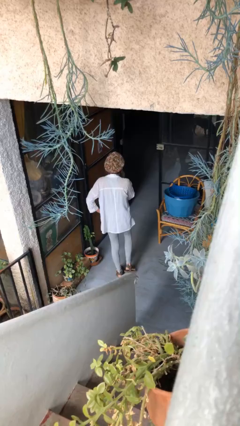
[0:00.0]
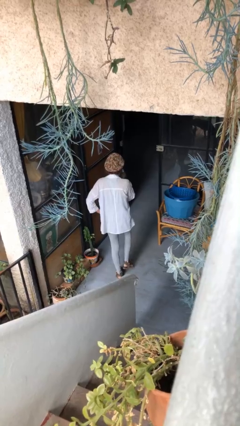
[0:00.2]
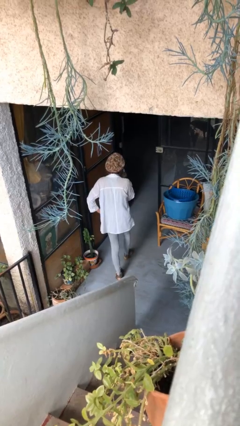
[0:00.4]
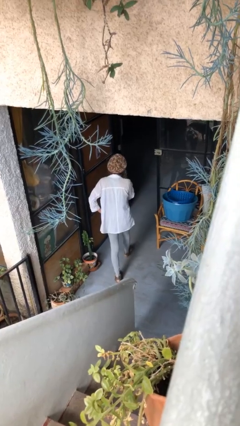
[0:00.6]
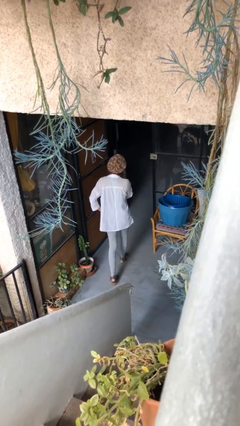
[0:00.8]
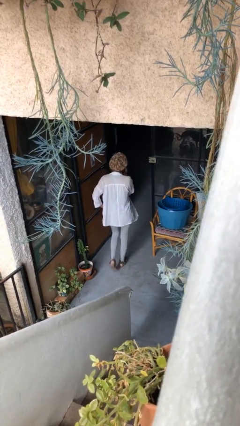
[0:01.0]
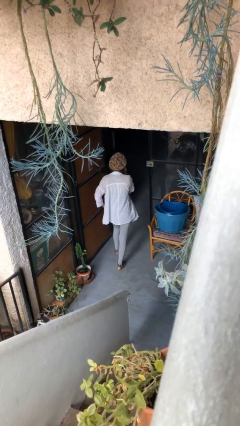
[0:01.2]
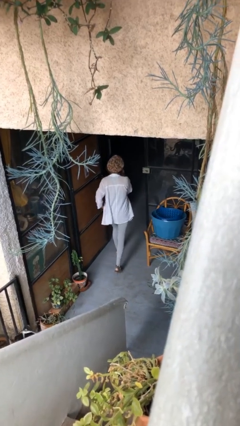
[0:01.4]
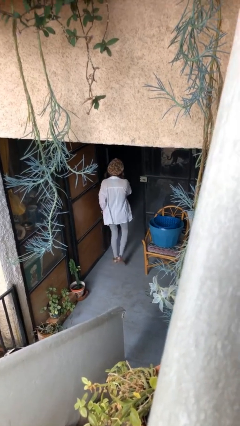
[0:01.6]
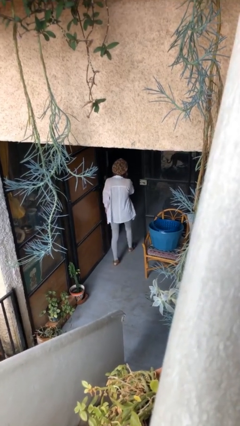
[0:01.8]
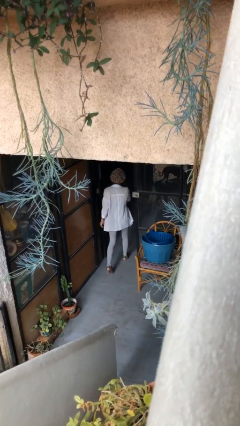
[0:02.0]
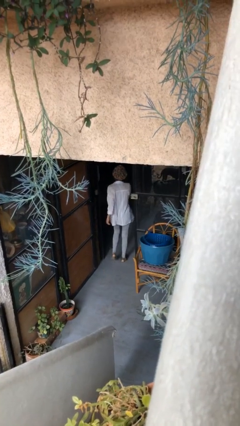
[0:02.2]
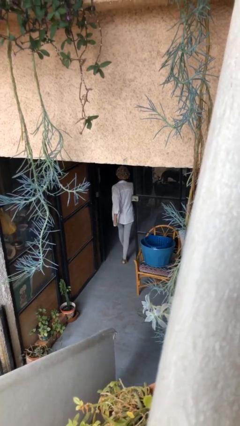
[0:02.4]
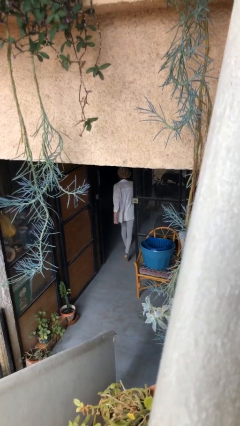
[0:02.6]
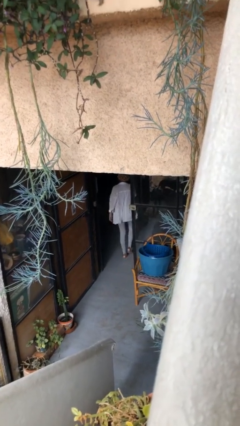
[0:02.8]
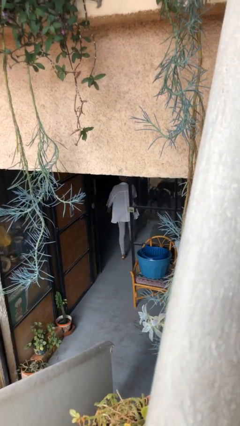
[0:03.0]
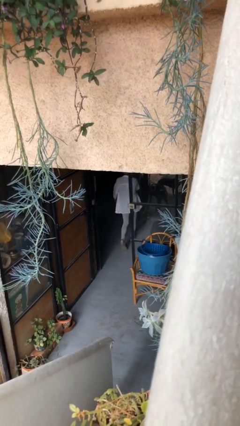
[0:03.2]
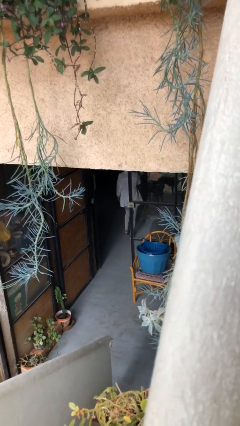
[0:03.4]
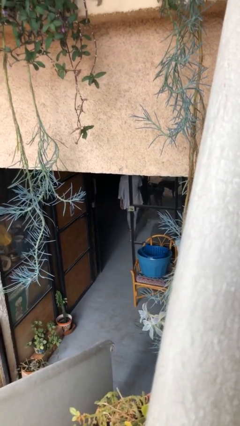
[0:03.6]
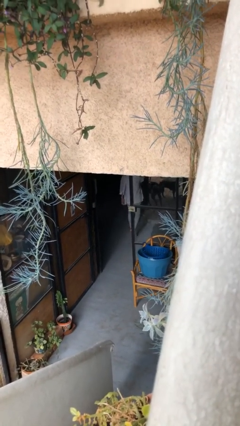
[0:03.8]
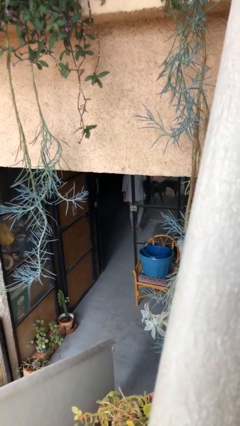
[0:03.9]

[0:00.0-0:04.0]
person exits scene through structure

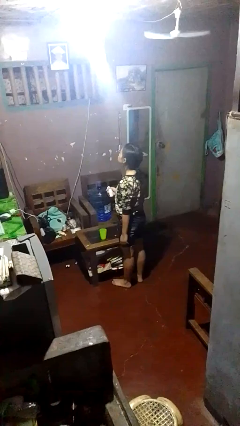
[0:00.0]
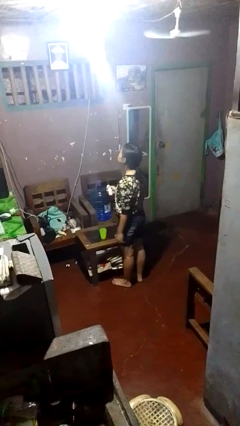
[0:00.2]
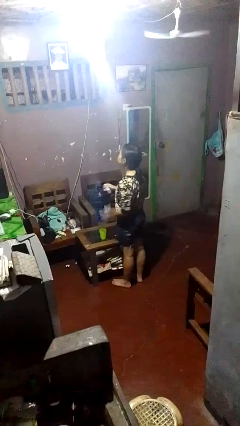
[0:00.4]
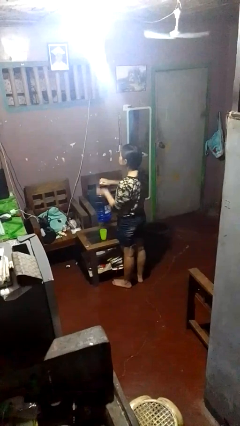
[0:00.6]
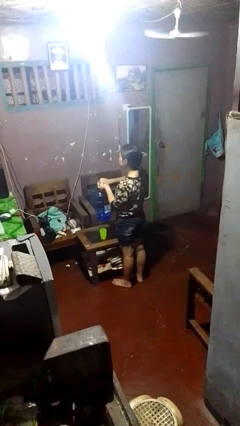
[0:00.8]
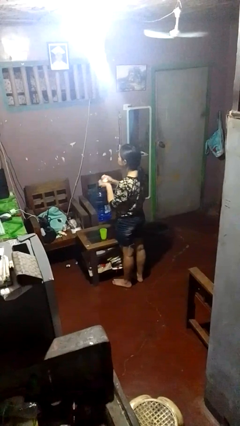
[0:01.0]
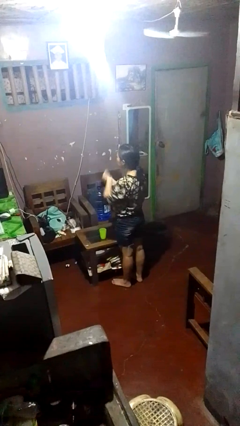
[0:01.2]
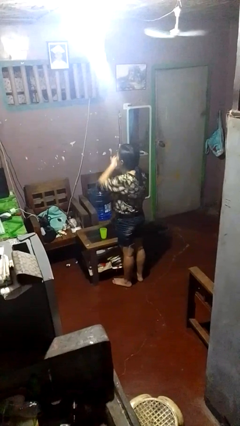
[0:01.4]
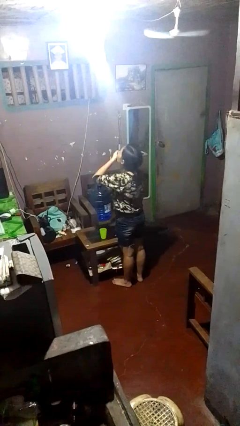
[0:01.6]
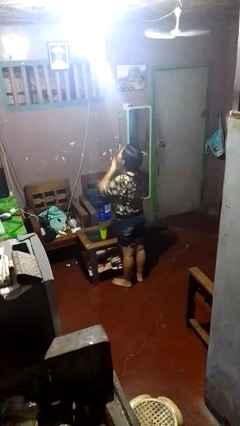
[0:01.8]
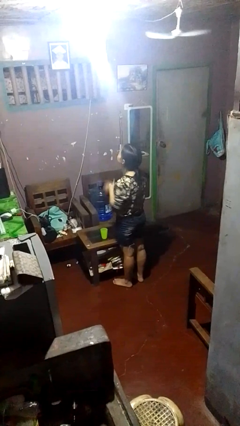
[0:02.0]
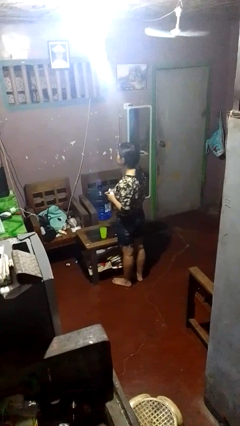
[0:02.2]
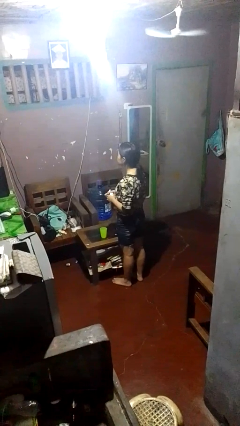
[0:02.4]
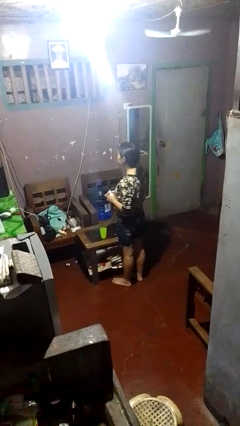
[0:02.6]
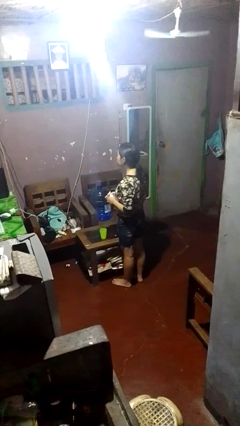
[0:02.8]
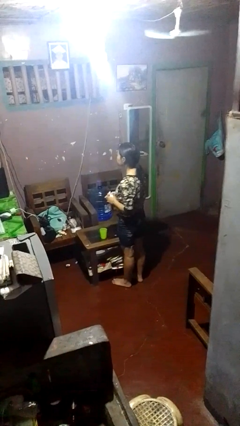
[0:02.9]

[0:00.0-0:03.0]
person takes medicine pills

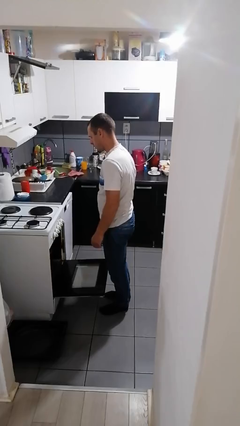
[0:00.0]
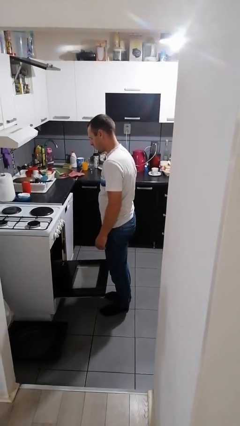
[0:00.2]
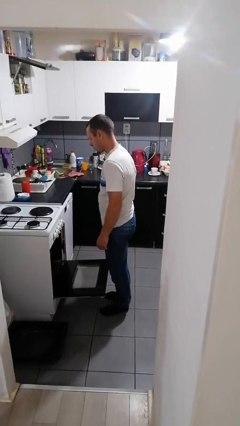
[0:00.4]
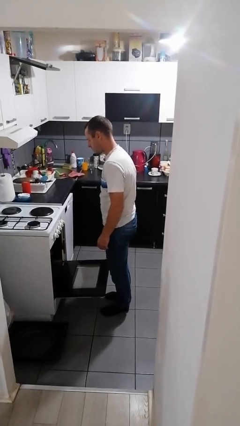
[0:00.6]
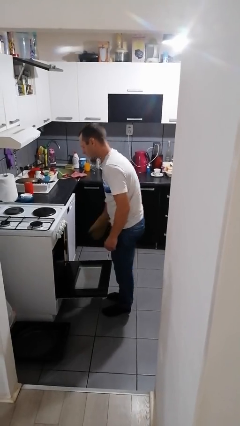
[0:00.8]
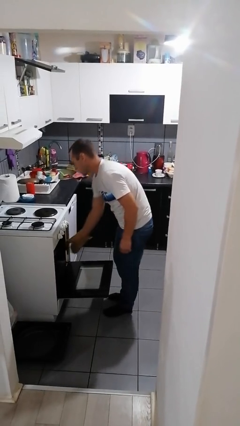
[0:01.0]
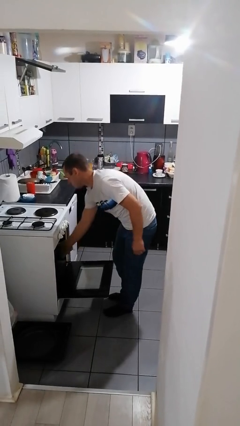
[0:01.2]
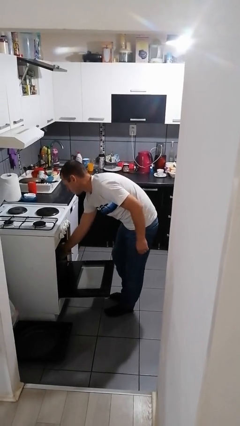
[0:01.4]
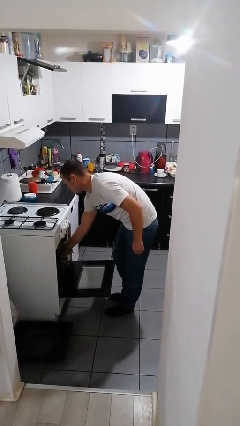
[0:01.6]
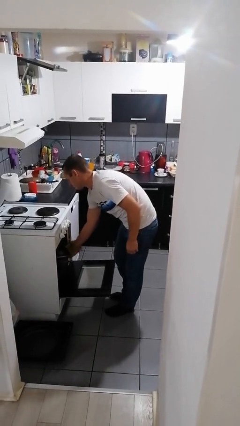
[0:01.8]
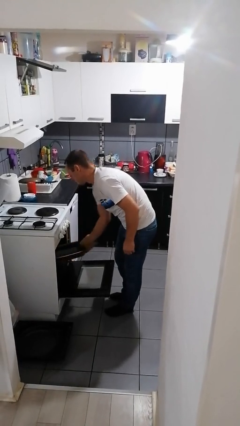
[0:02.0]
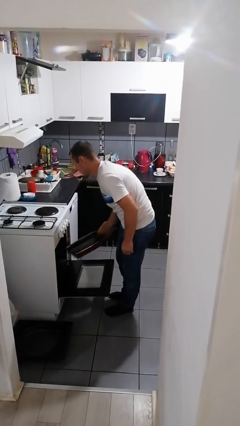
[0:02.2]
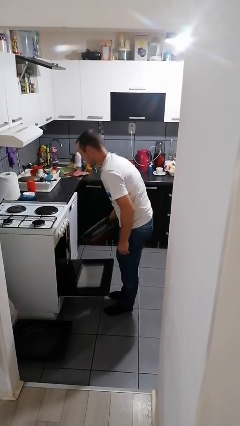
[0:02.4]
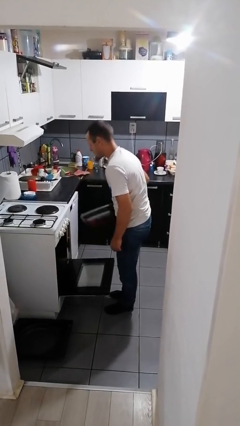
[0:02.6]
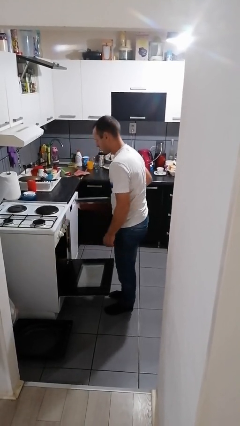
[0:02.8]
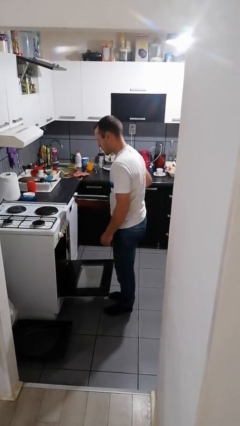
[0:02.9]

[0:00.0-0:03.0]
person takes object from oven

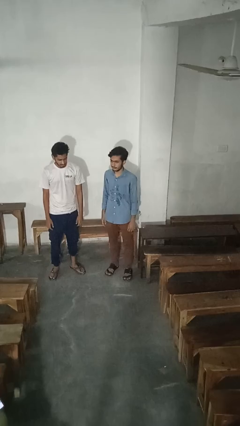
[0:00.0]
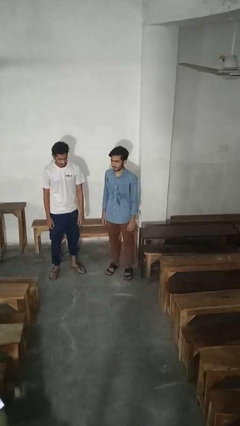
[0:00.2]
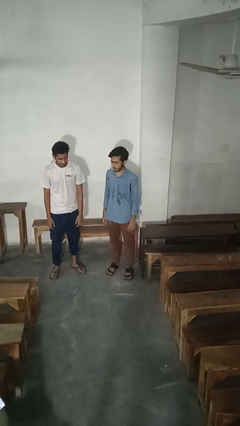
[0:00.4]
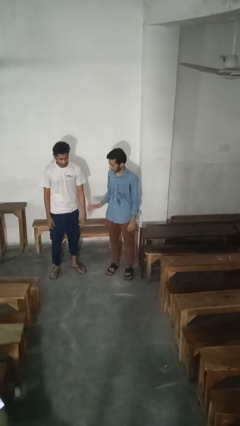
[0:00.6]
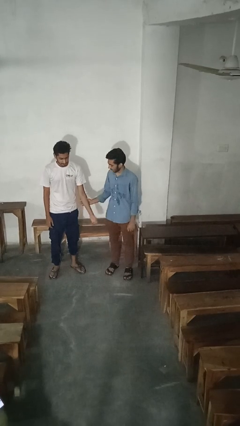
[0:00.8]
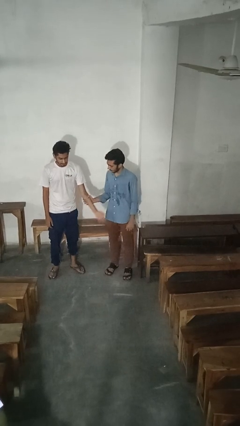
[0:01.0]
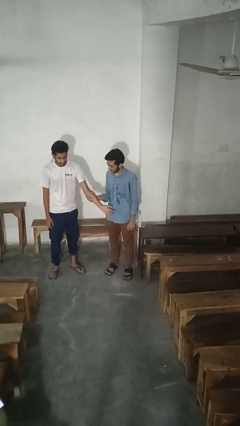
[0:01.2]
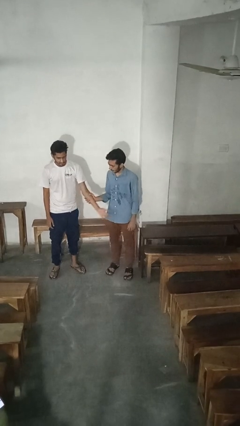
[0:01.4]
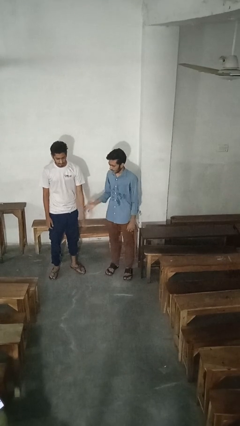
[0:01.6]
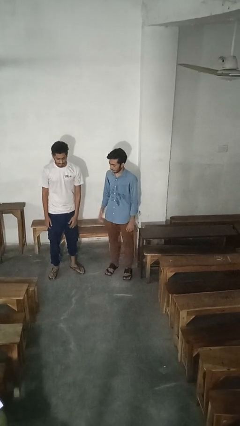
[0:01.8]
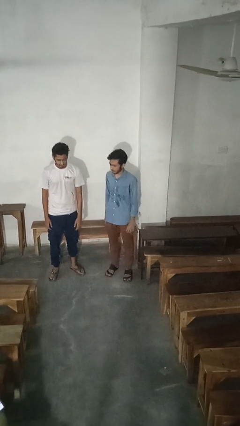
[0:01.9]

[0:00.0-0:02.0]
person grabs person by forearm

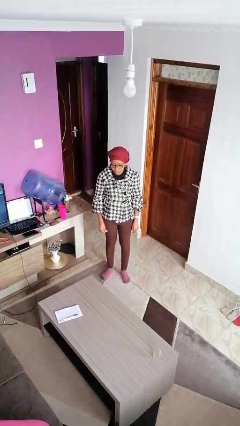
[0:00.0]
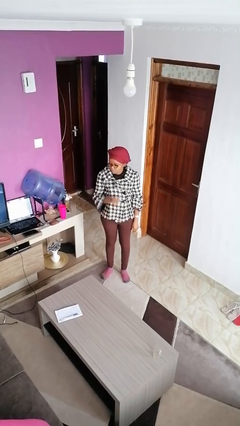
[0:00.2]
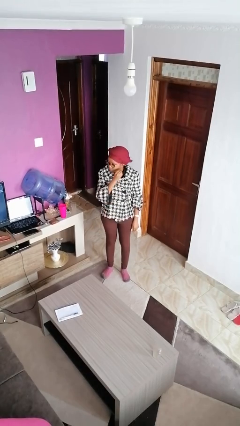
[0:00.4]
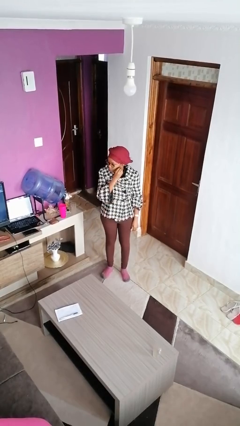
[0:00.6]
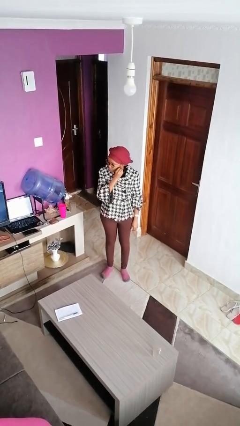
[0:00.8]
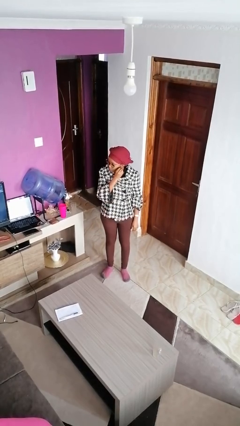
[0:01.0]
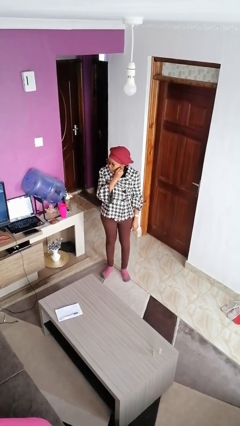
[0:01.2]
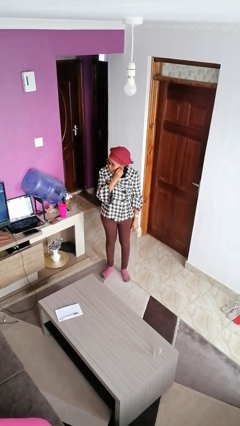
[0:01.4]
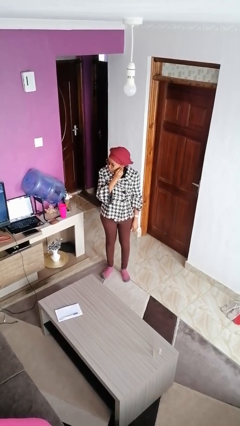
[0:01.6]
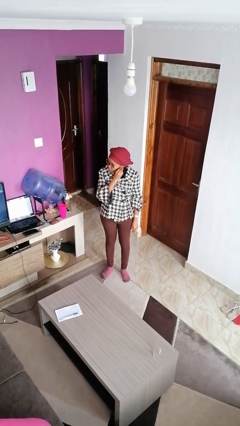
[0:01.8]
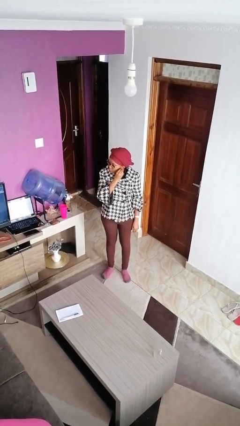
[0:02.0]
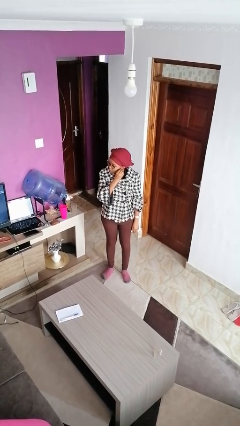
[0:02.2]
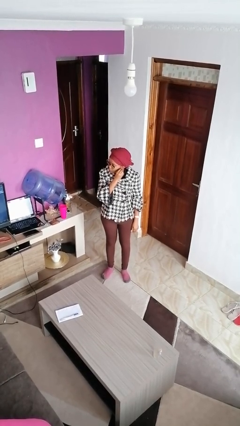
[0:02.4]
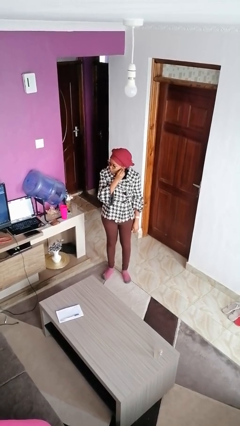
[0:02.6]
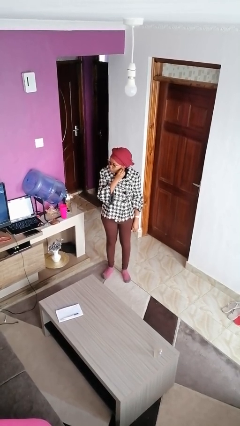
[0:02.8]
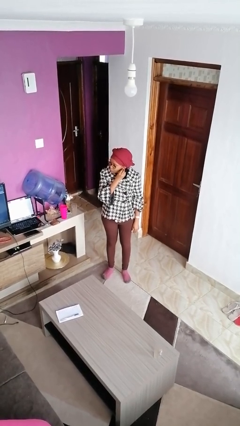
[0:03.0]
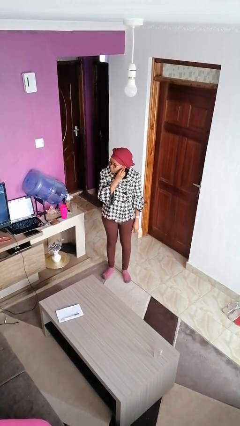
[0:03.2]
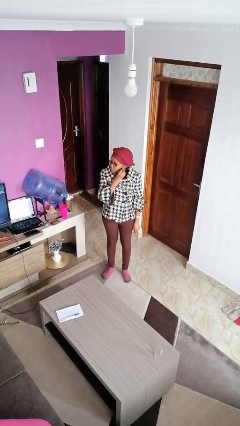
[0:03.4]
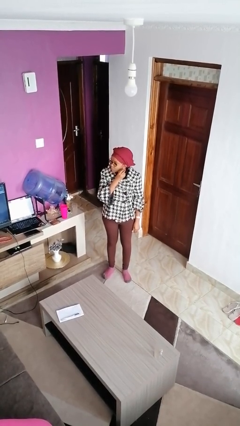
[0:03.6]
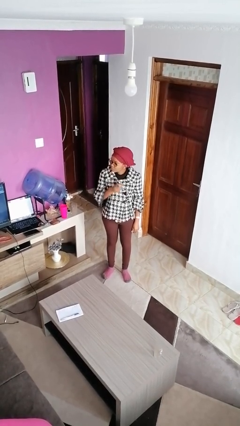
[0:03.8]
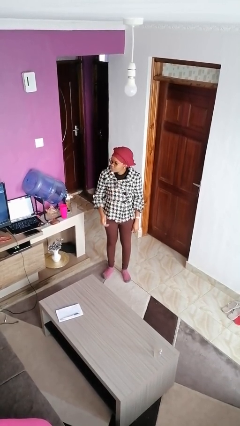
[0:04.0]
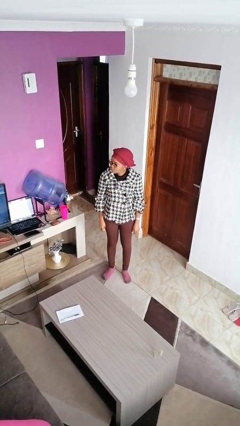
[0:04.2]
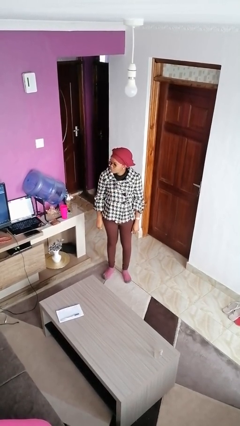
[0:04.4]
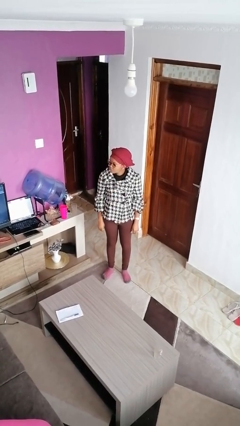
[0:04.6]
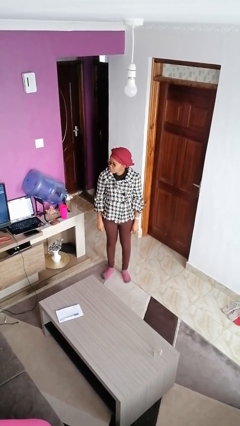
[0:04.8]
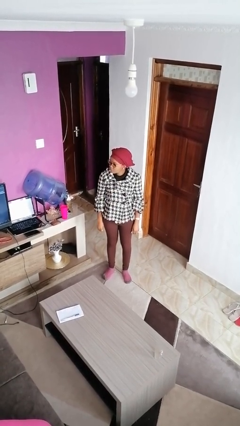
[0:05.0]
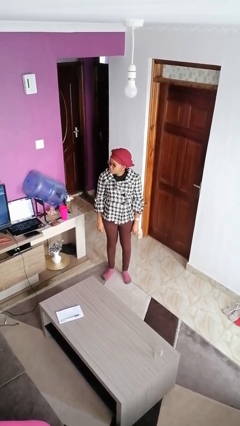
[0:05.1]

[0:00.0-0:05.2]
person puts on earrings

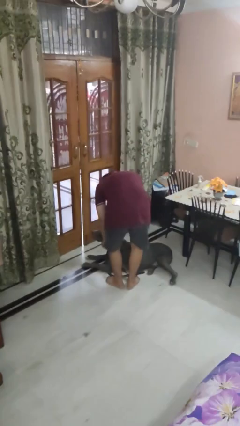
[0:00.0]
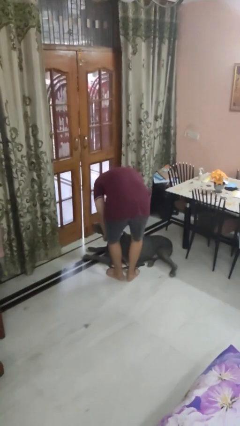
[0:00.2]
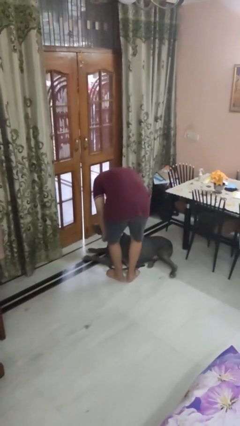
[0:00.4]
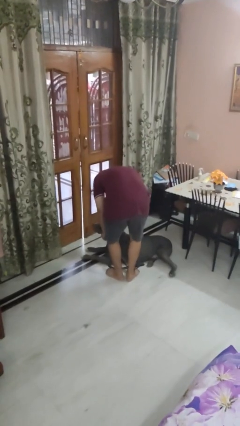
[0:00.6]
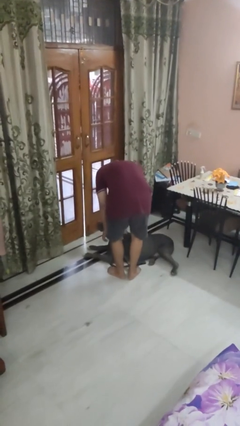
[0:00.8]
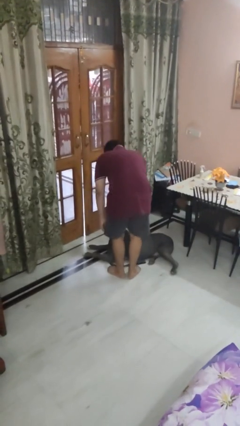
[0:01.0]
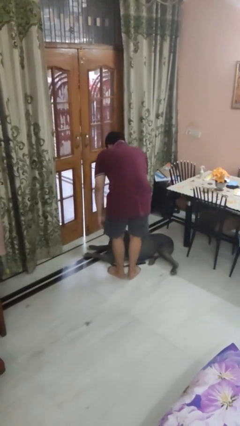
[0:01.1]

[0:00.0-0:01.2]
person attaches leash to dog
